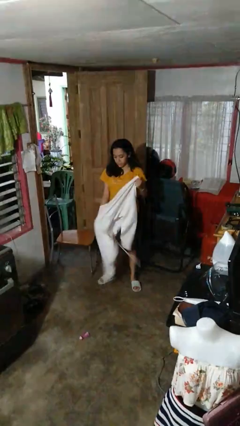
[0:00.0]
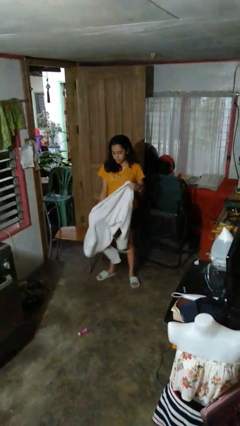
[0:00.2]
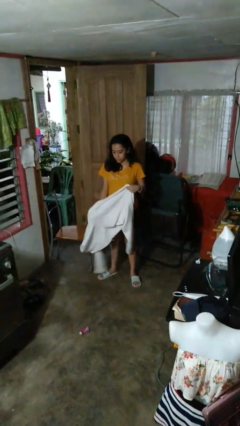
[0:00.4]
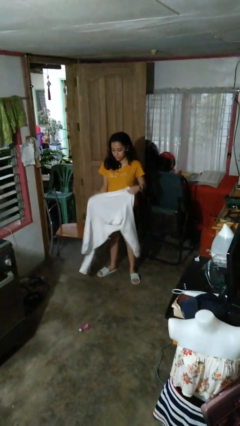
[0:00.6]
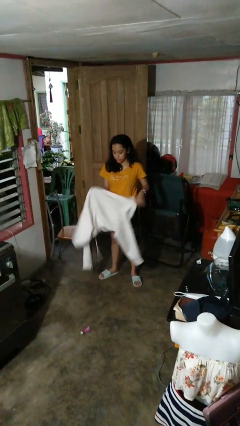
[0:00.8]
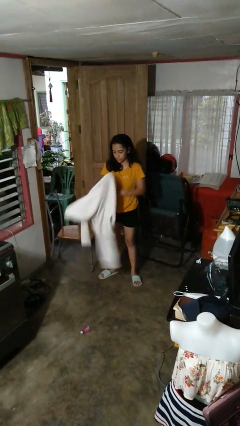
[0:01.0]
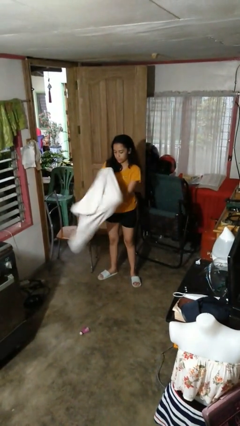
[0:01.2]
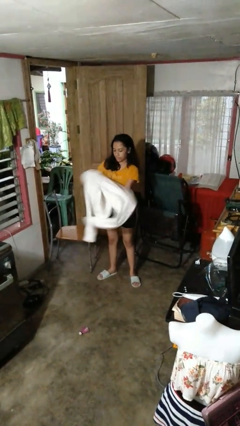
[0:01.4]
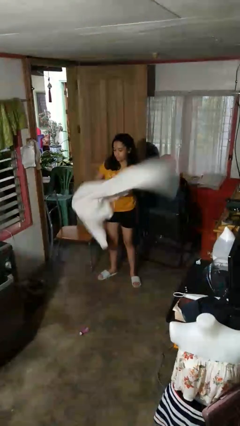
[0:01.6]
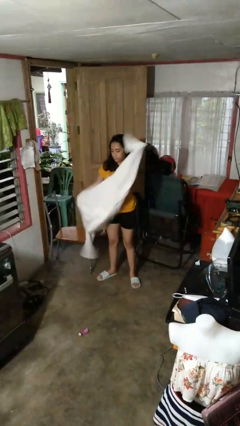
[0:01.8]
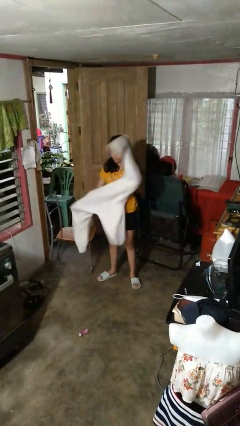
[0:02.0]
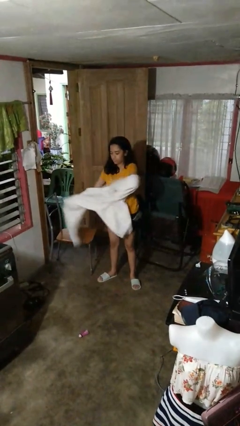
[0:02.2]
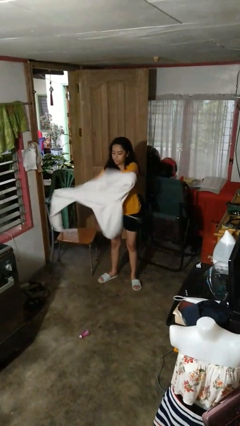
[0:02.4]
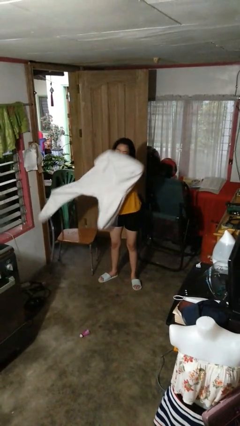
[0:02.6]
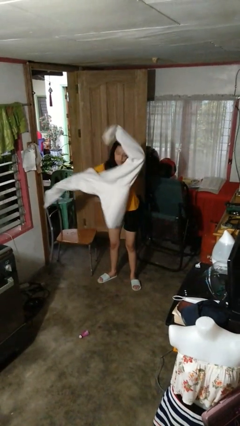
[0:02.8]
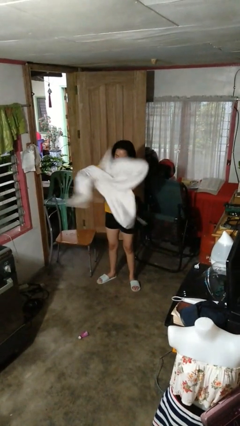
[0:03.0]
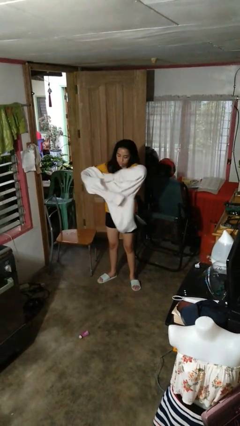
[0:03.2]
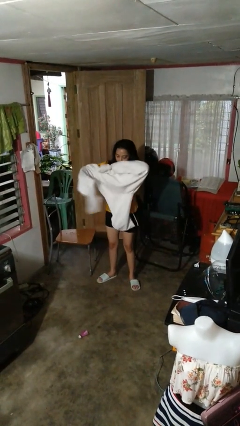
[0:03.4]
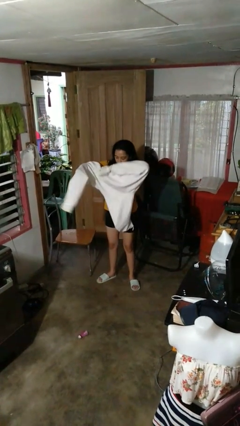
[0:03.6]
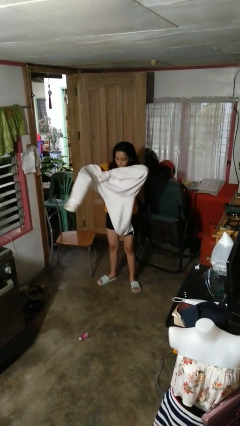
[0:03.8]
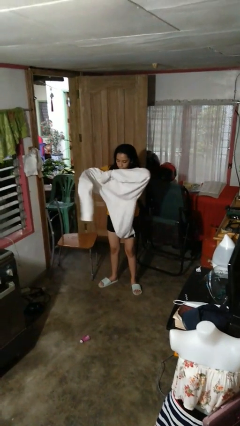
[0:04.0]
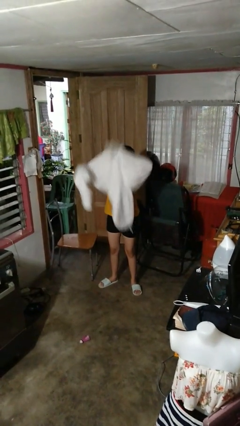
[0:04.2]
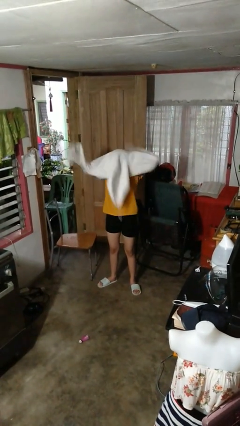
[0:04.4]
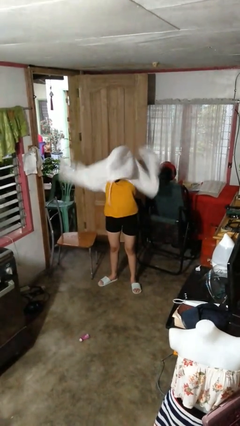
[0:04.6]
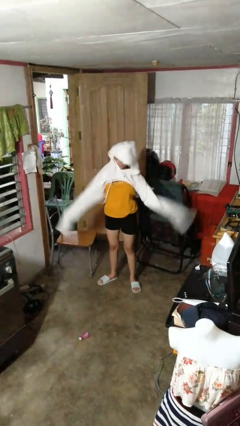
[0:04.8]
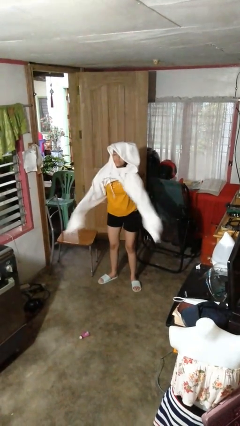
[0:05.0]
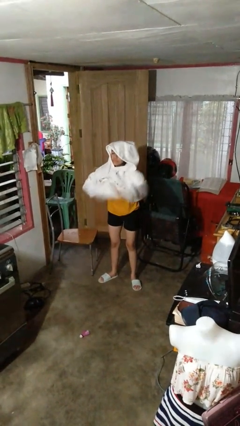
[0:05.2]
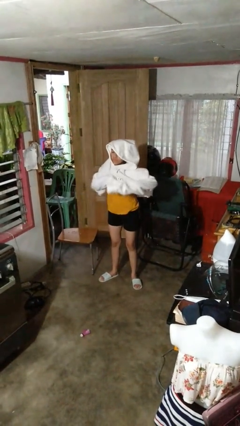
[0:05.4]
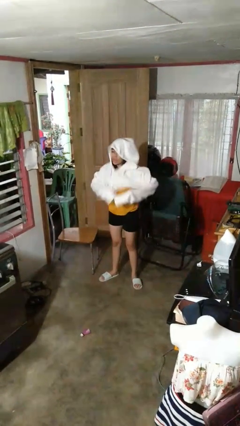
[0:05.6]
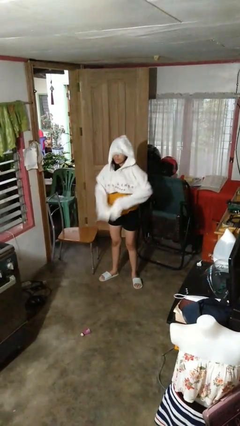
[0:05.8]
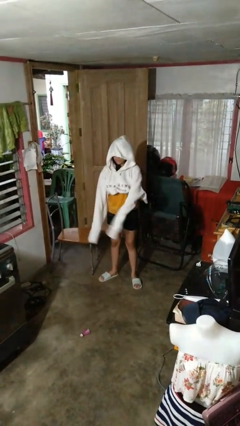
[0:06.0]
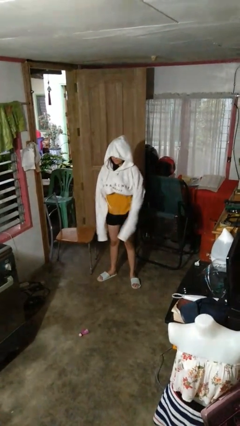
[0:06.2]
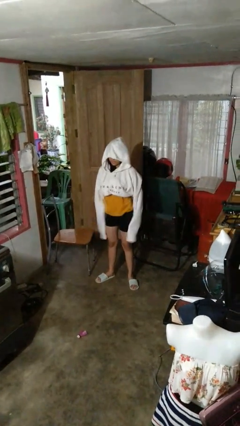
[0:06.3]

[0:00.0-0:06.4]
person puts on hoodie

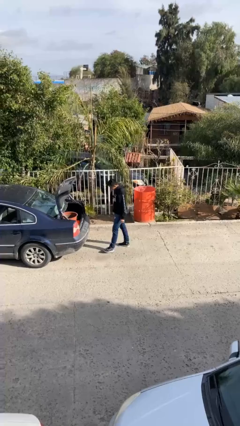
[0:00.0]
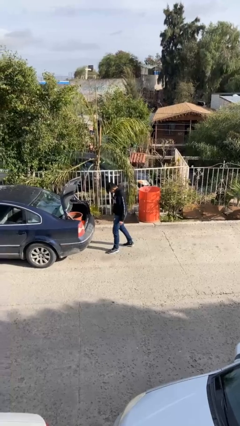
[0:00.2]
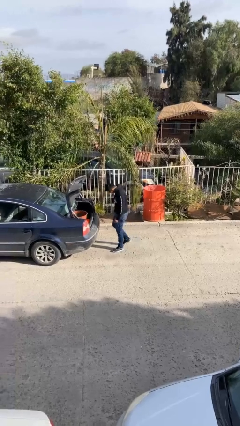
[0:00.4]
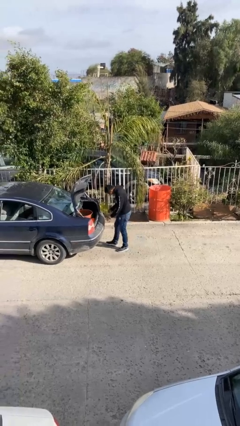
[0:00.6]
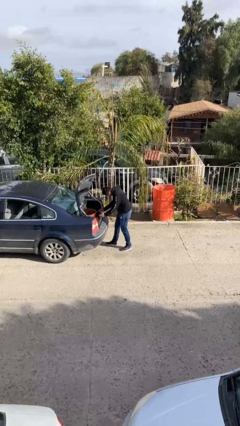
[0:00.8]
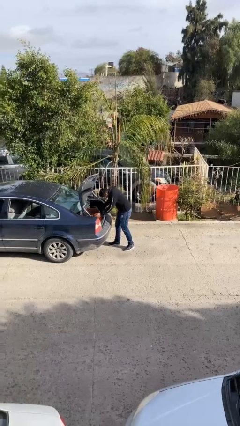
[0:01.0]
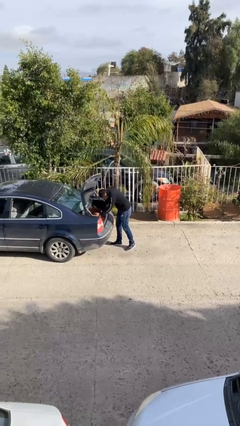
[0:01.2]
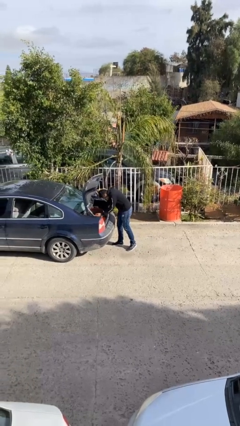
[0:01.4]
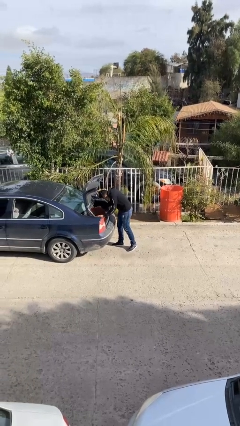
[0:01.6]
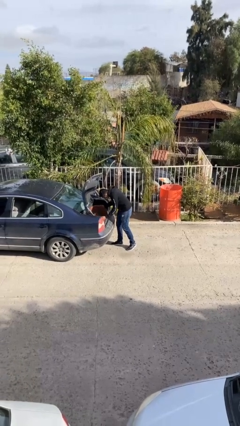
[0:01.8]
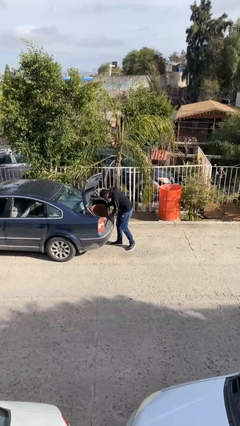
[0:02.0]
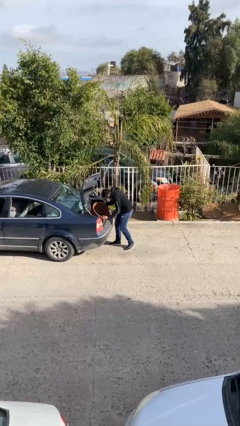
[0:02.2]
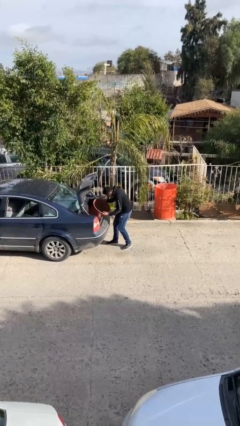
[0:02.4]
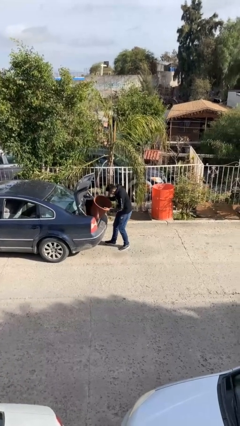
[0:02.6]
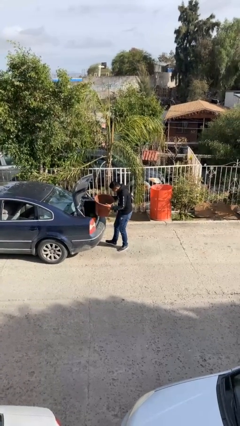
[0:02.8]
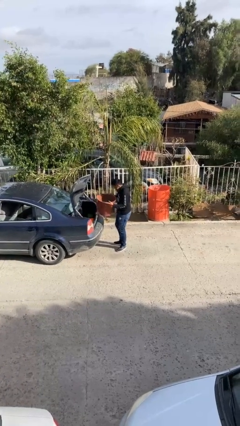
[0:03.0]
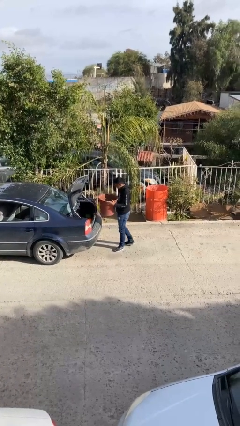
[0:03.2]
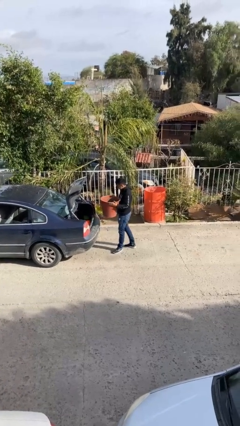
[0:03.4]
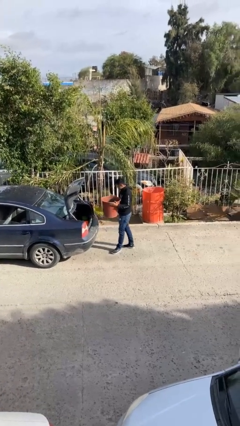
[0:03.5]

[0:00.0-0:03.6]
person unloads car

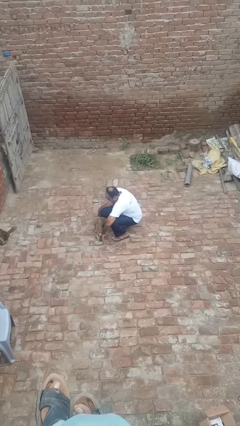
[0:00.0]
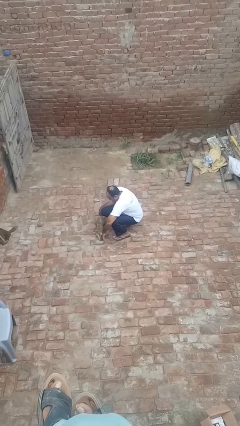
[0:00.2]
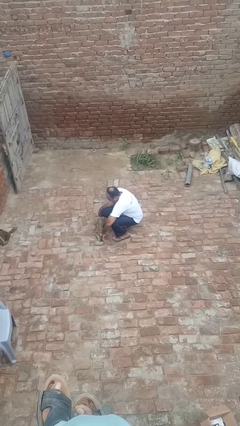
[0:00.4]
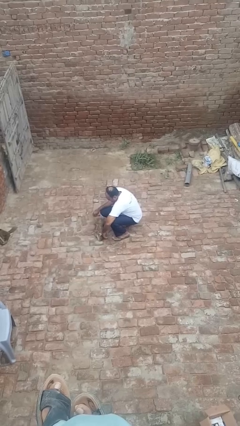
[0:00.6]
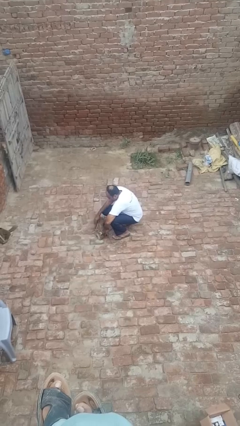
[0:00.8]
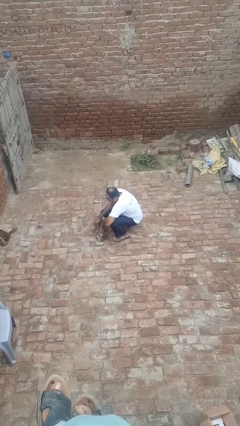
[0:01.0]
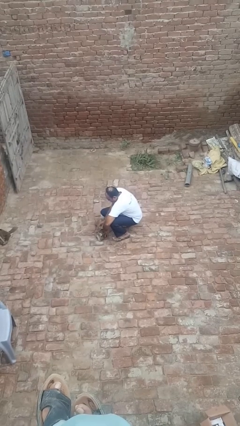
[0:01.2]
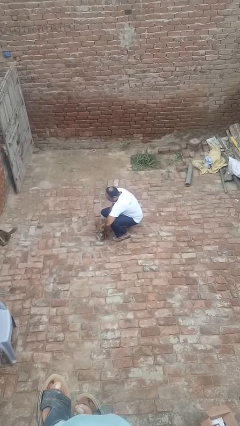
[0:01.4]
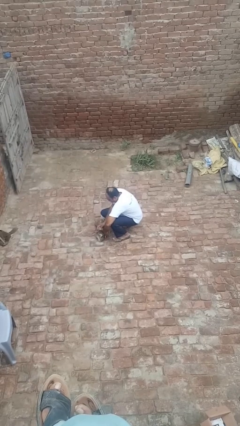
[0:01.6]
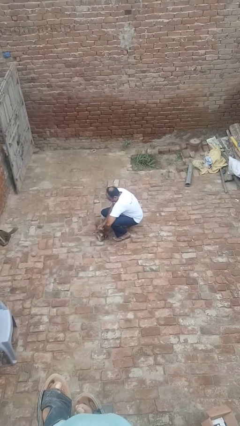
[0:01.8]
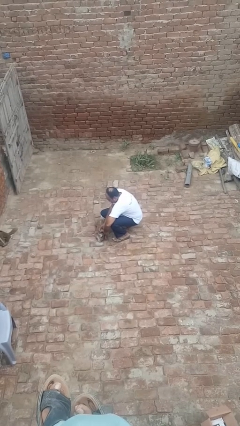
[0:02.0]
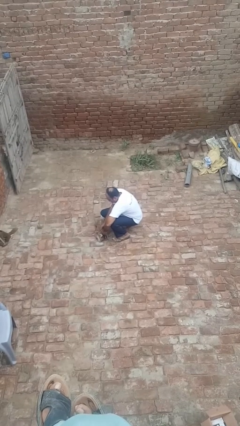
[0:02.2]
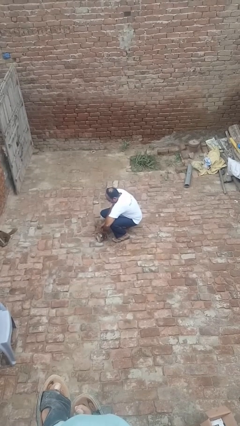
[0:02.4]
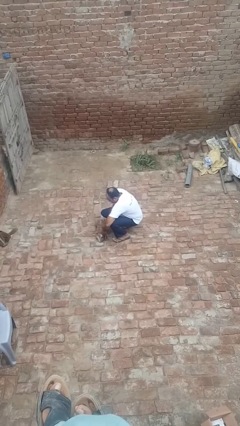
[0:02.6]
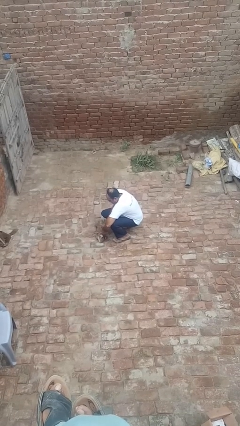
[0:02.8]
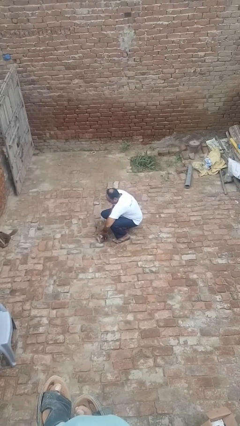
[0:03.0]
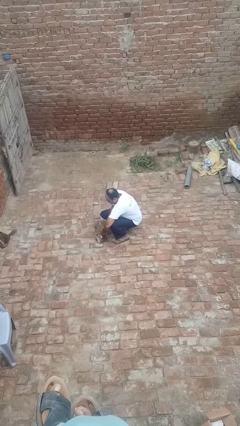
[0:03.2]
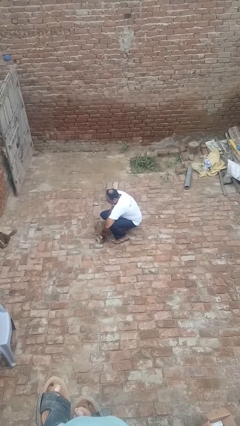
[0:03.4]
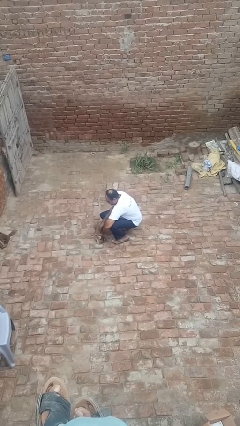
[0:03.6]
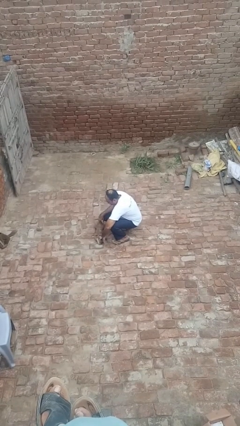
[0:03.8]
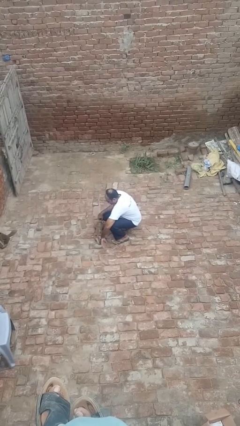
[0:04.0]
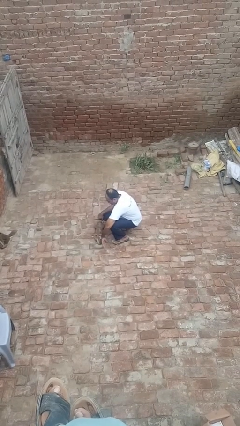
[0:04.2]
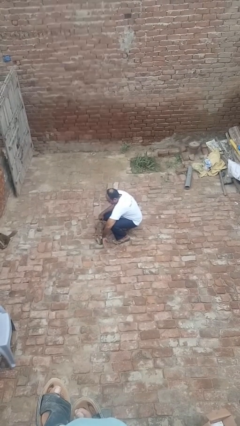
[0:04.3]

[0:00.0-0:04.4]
person attaches leash to dog

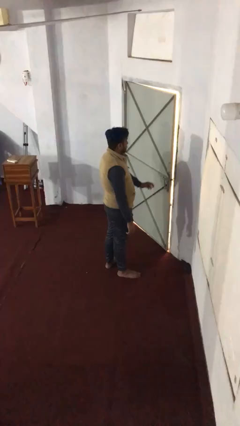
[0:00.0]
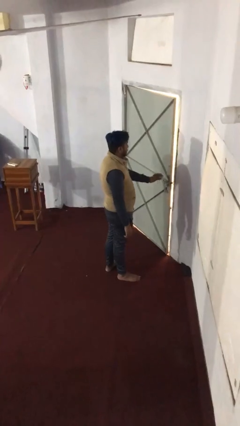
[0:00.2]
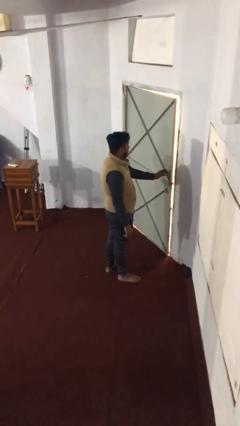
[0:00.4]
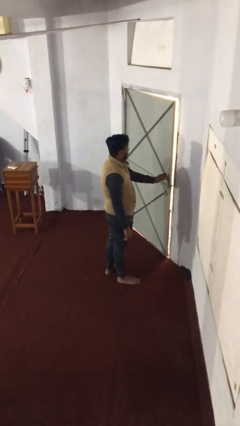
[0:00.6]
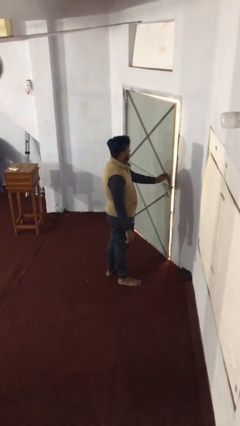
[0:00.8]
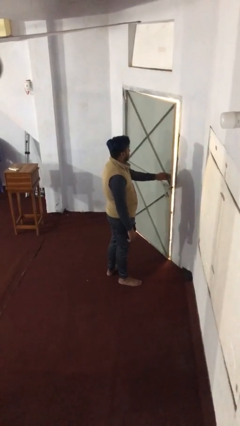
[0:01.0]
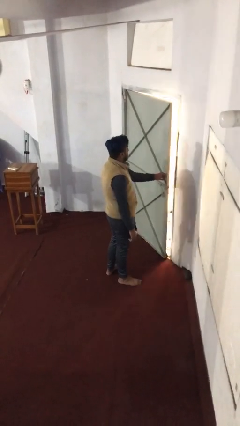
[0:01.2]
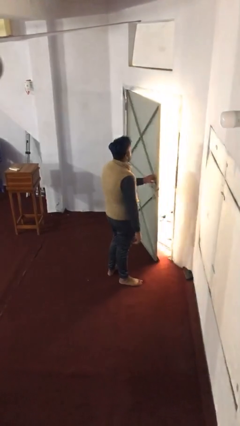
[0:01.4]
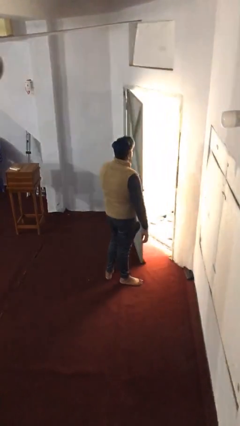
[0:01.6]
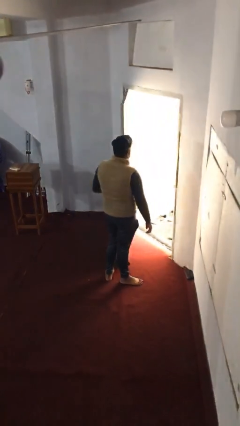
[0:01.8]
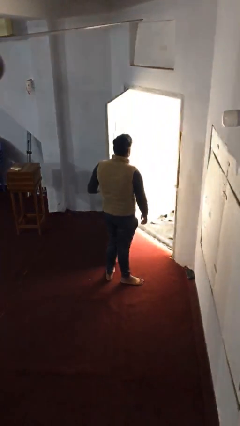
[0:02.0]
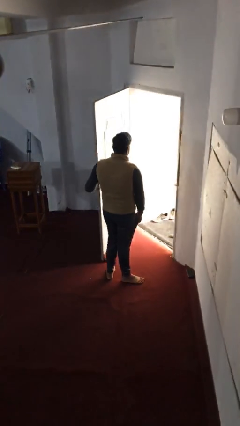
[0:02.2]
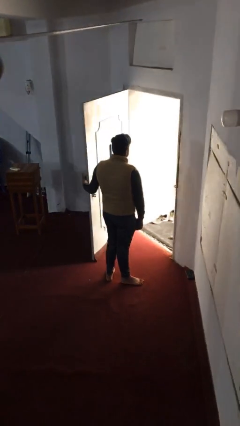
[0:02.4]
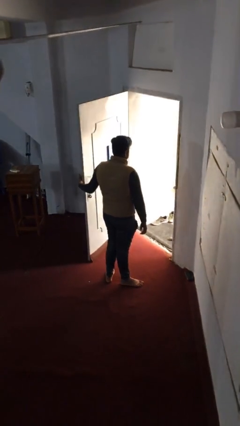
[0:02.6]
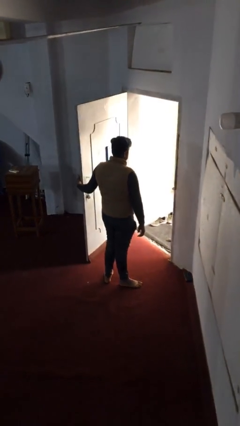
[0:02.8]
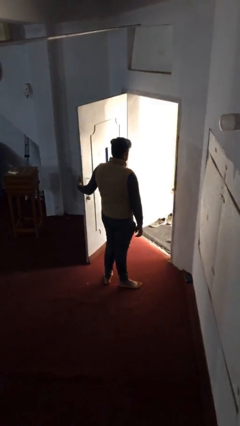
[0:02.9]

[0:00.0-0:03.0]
person opens facility door

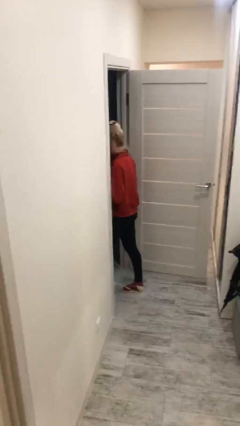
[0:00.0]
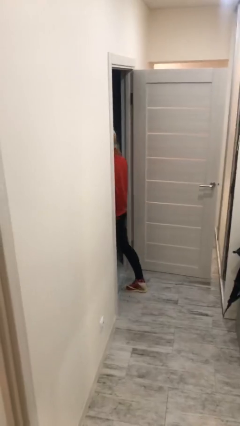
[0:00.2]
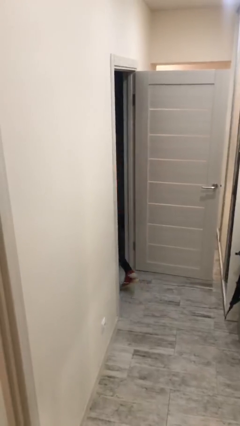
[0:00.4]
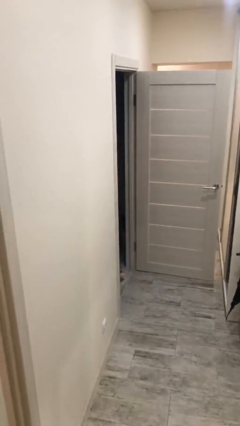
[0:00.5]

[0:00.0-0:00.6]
person exits scene through structure
